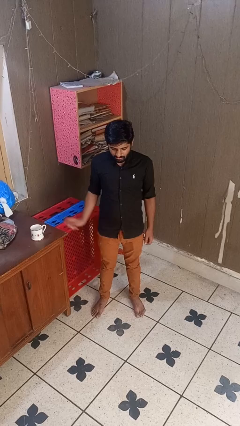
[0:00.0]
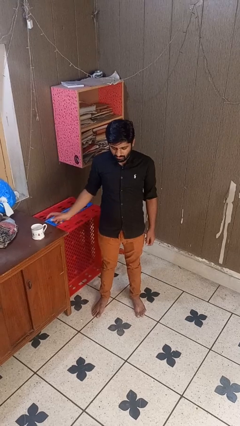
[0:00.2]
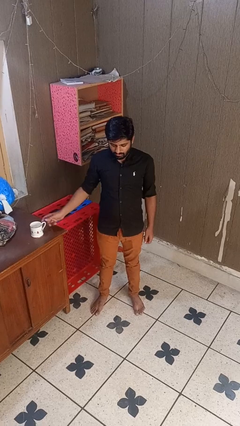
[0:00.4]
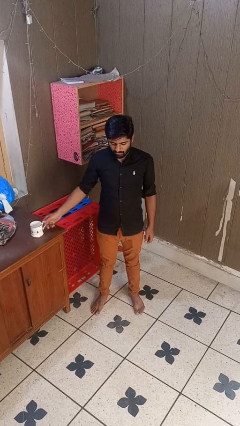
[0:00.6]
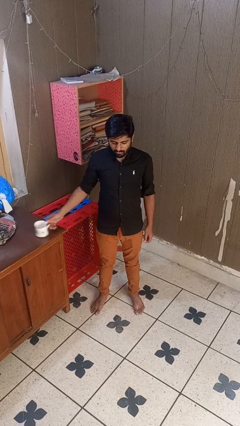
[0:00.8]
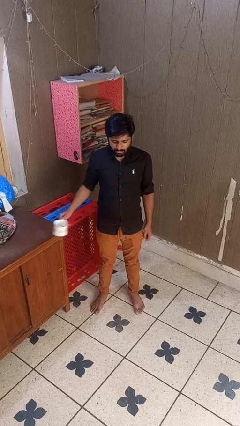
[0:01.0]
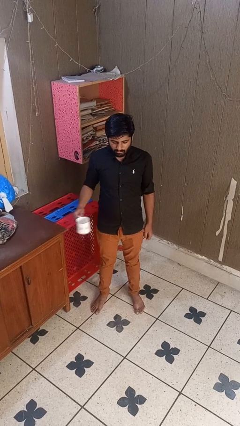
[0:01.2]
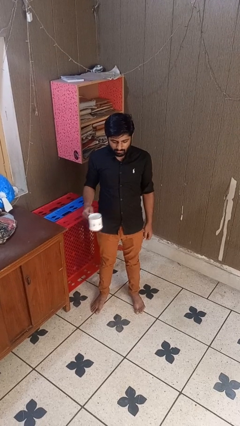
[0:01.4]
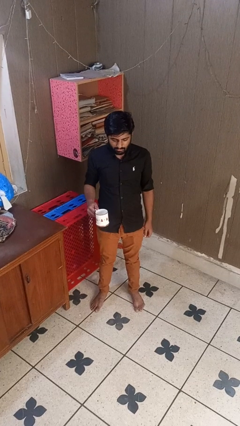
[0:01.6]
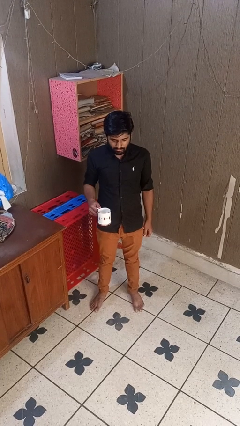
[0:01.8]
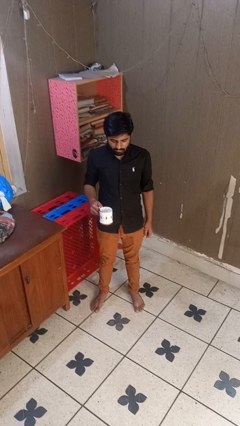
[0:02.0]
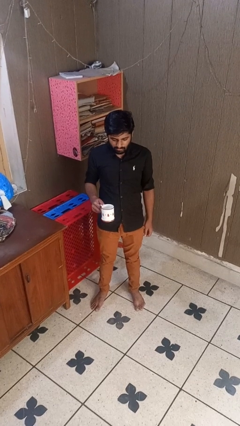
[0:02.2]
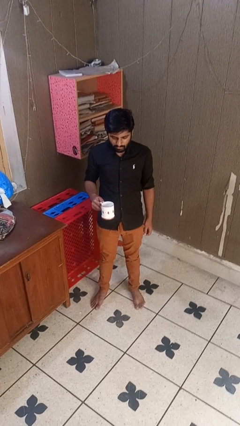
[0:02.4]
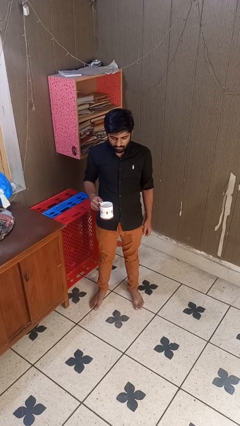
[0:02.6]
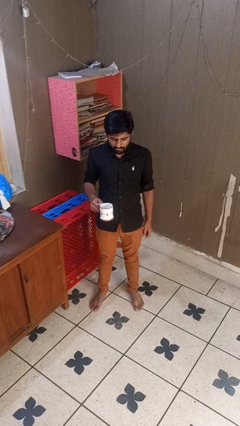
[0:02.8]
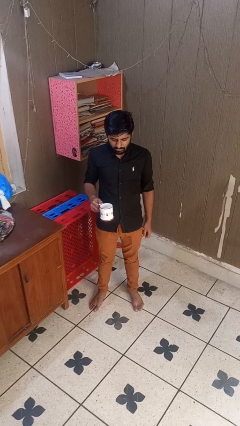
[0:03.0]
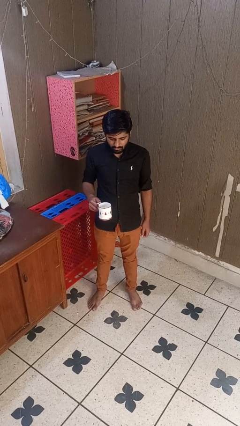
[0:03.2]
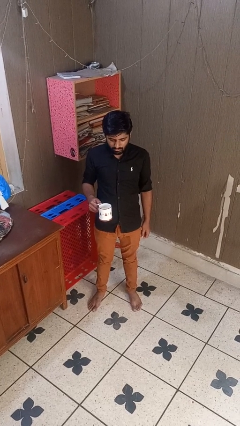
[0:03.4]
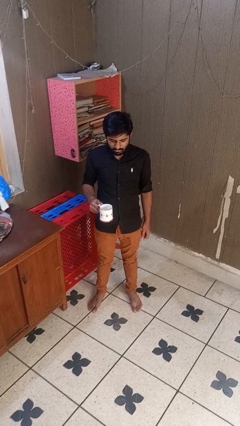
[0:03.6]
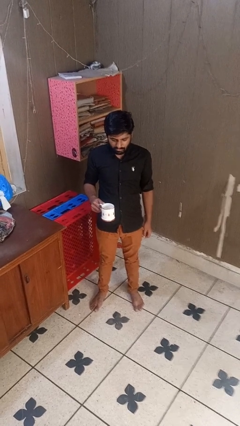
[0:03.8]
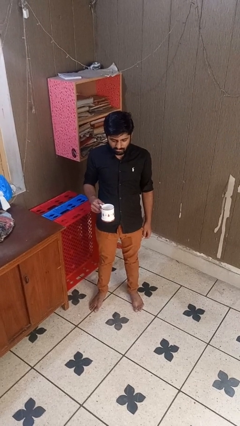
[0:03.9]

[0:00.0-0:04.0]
person picks up object from table

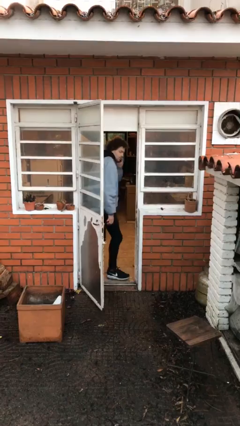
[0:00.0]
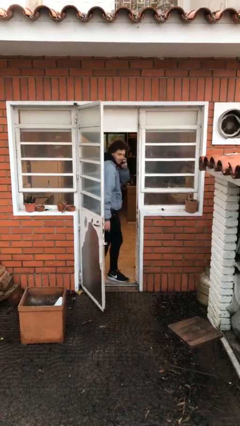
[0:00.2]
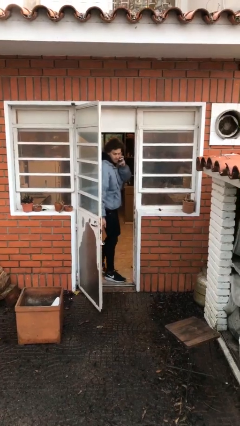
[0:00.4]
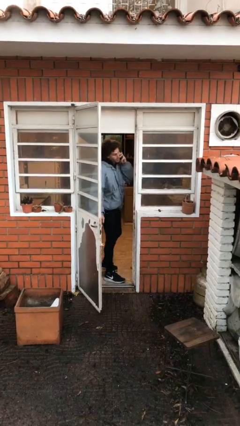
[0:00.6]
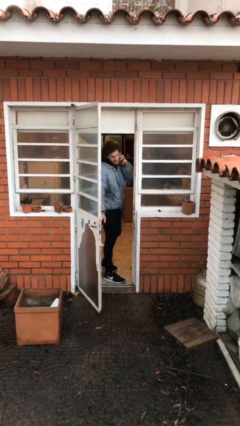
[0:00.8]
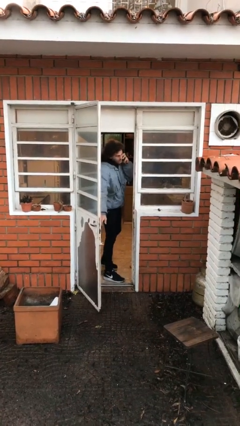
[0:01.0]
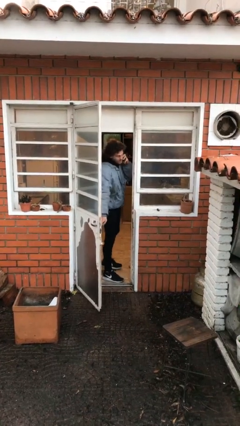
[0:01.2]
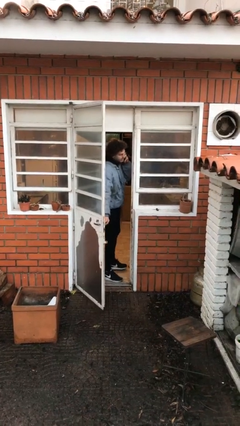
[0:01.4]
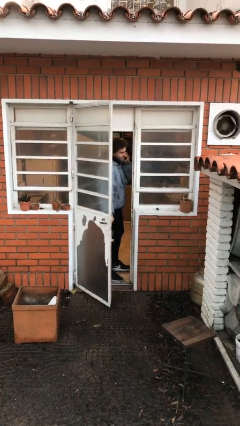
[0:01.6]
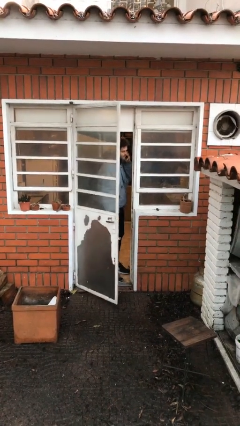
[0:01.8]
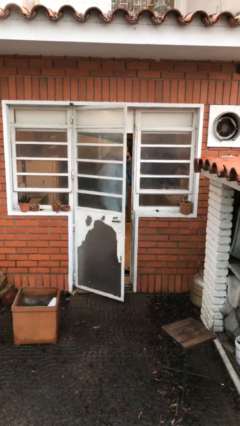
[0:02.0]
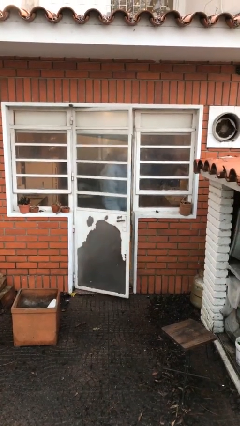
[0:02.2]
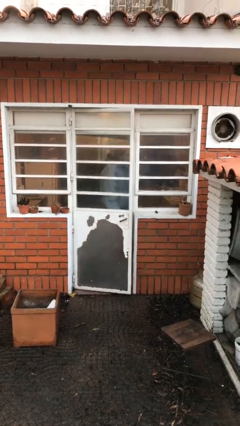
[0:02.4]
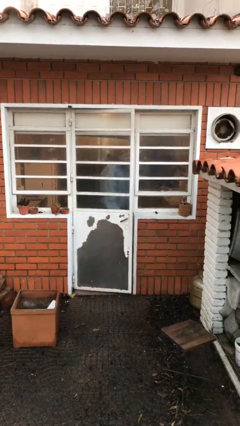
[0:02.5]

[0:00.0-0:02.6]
person closes facility door

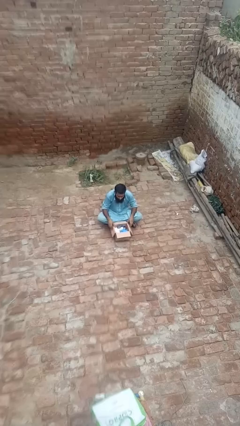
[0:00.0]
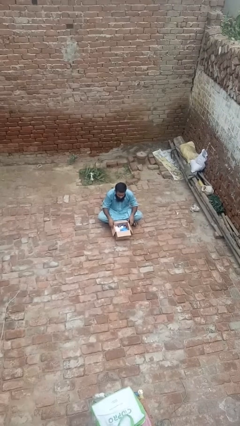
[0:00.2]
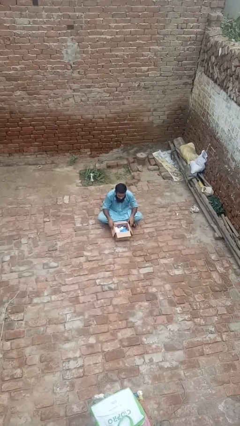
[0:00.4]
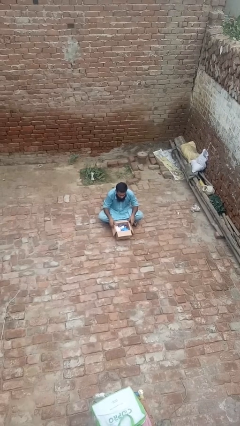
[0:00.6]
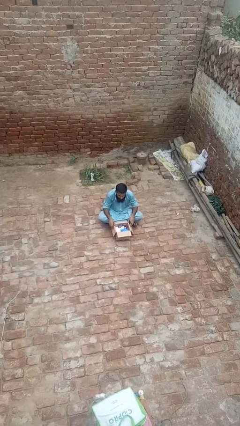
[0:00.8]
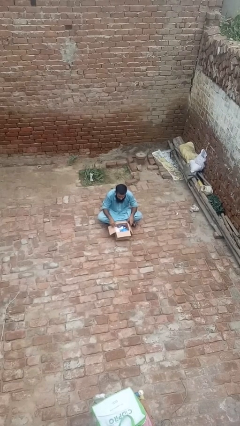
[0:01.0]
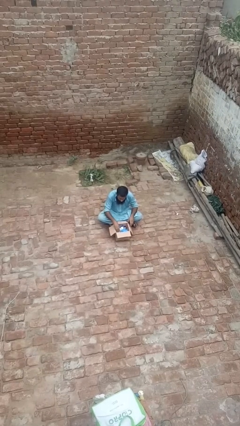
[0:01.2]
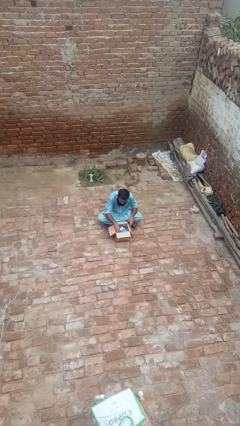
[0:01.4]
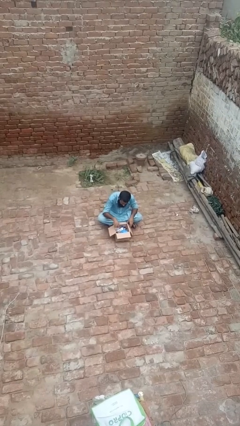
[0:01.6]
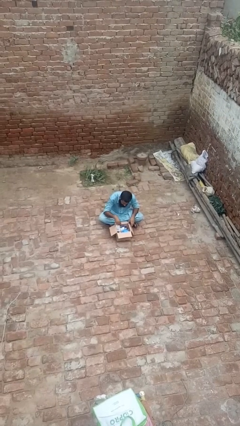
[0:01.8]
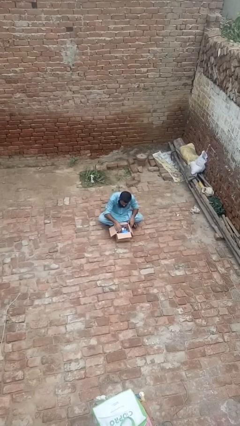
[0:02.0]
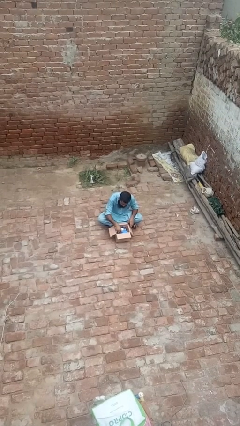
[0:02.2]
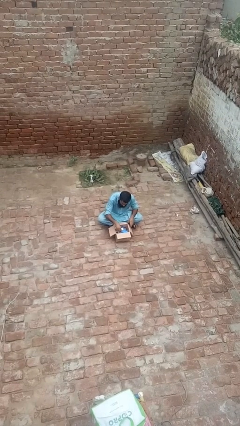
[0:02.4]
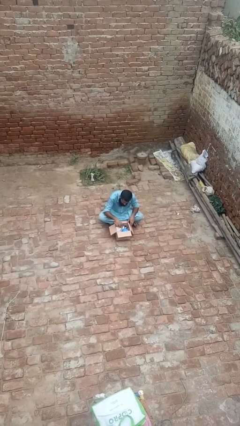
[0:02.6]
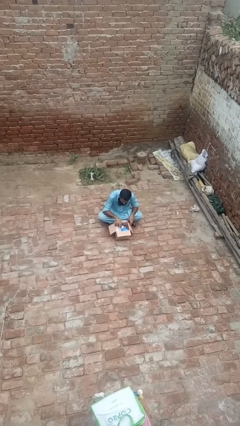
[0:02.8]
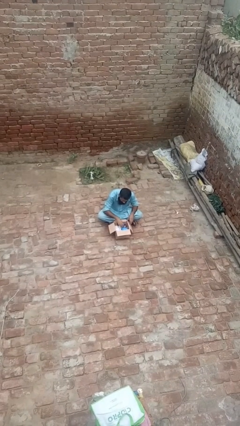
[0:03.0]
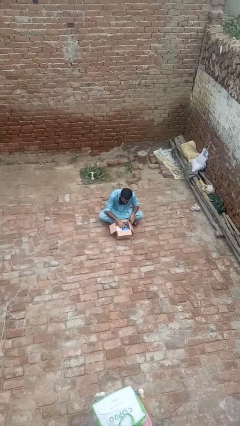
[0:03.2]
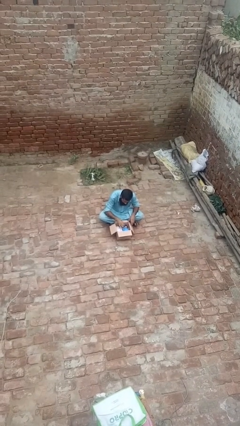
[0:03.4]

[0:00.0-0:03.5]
person searches in box

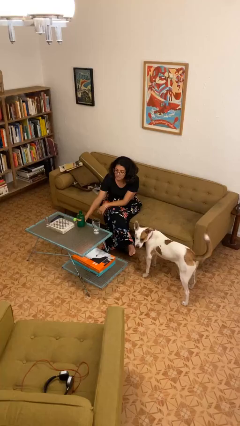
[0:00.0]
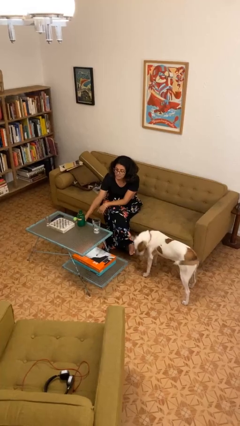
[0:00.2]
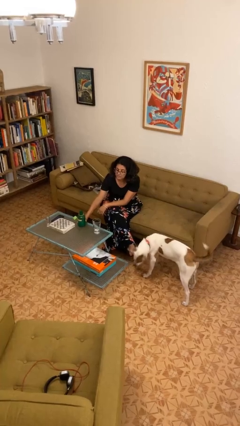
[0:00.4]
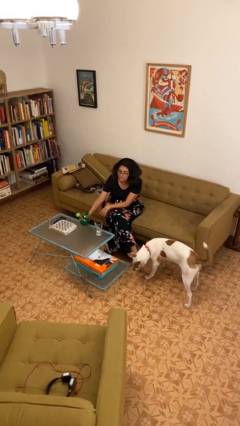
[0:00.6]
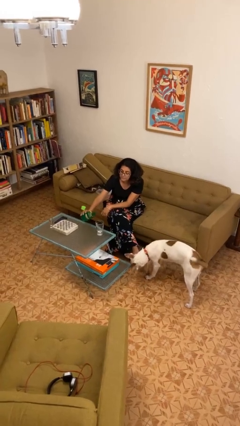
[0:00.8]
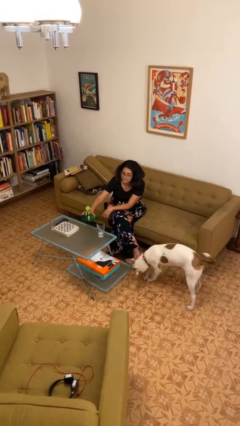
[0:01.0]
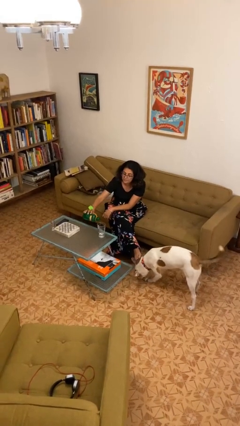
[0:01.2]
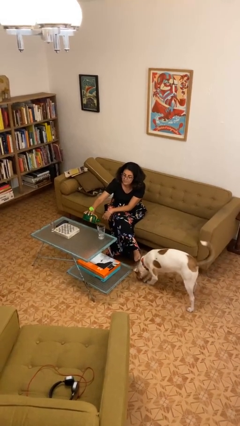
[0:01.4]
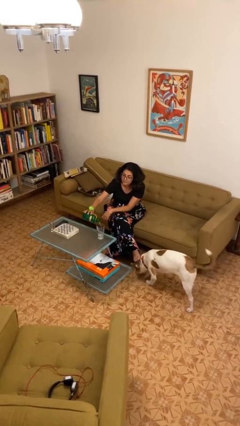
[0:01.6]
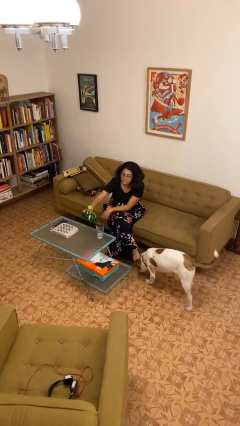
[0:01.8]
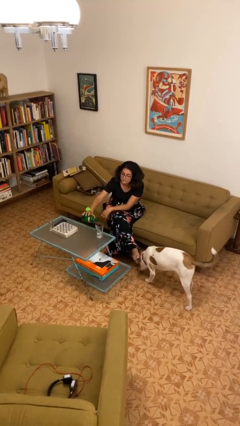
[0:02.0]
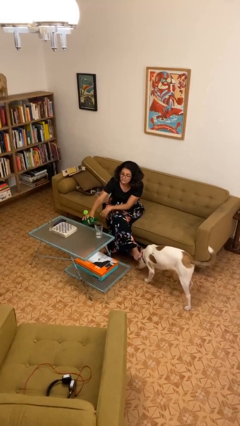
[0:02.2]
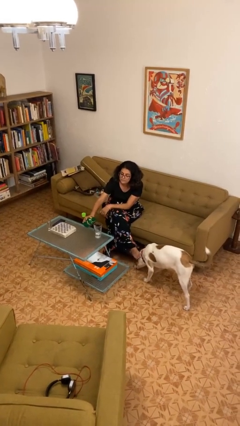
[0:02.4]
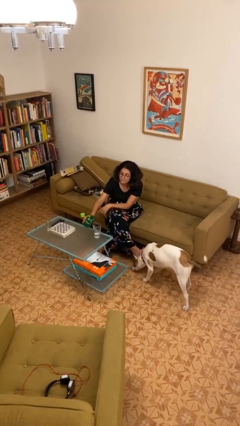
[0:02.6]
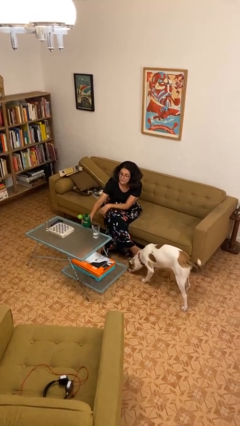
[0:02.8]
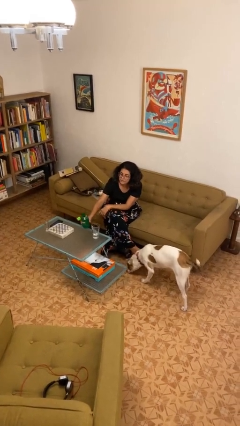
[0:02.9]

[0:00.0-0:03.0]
person pours liquid into cup

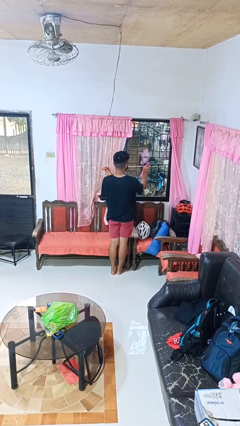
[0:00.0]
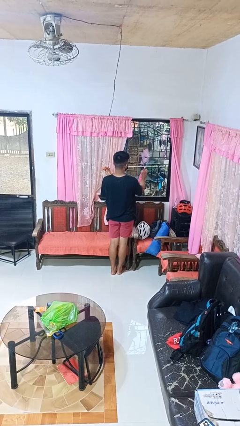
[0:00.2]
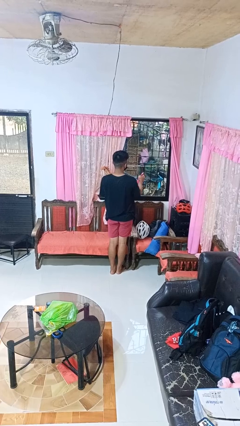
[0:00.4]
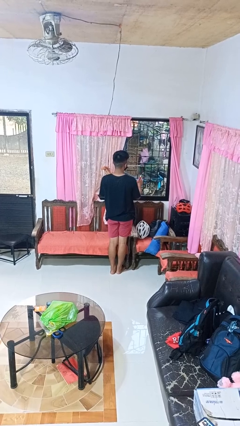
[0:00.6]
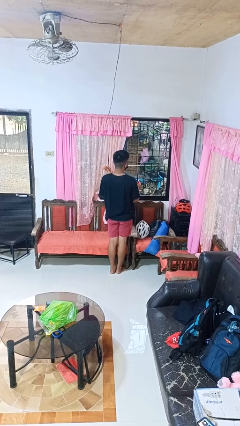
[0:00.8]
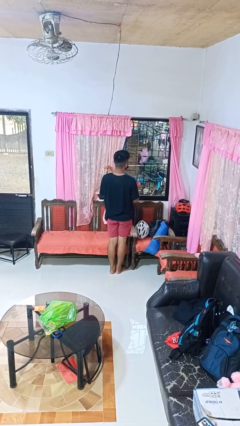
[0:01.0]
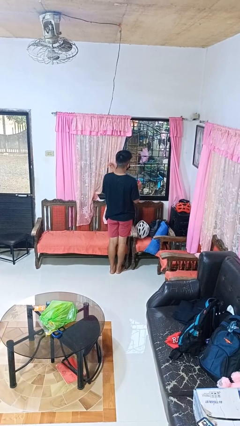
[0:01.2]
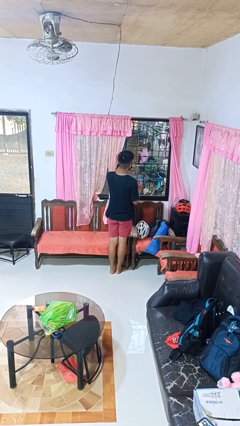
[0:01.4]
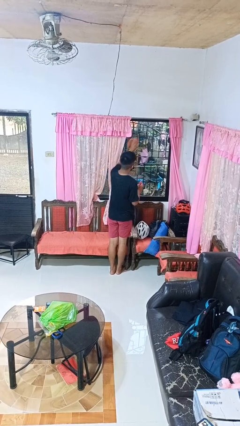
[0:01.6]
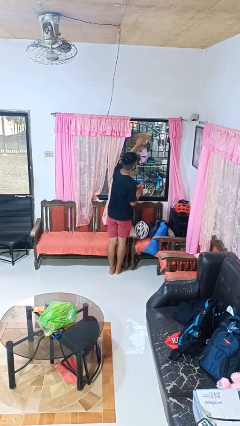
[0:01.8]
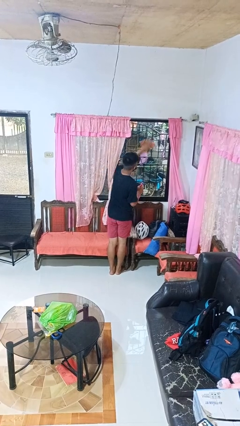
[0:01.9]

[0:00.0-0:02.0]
person sprays from bottle

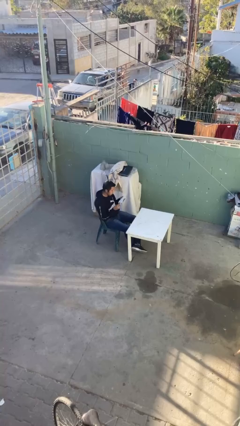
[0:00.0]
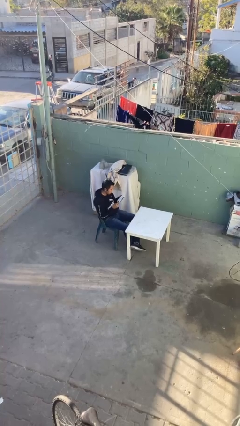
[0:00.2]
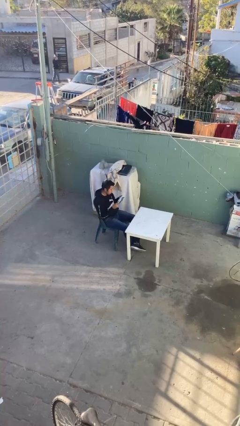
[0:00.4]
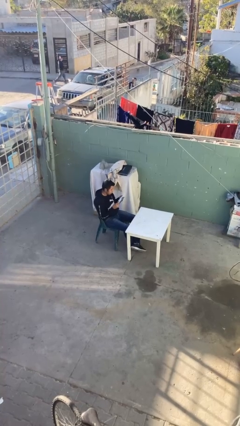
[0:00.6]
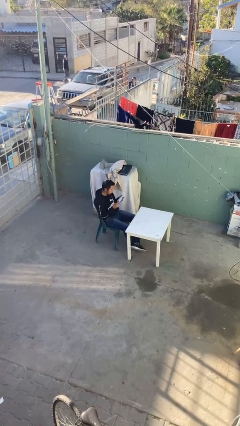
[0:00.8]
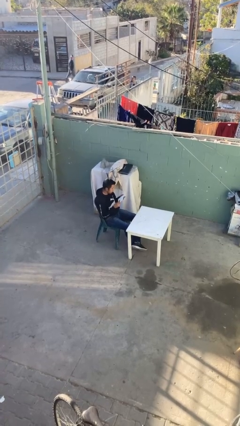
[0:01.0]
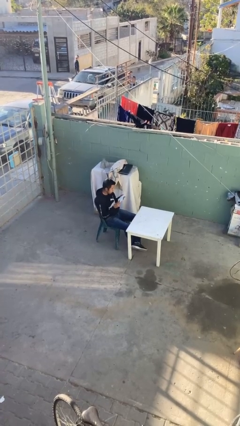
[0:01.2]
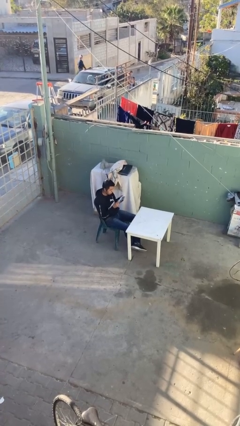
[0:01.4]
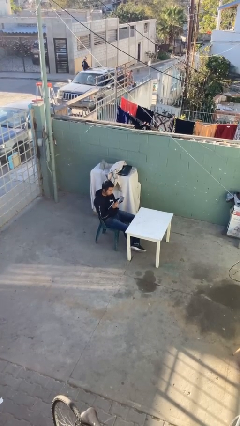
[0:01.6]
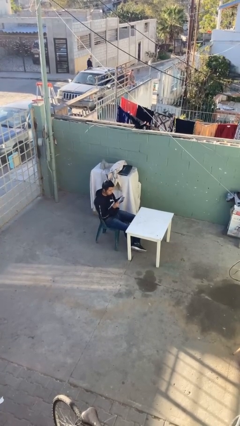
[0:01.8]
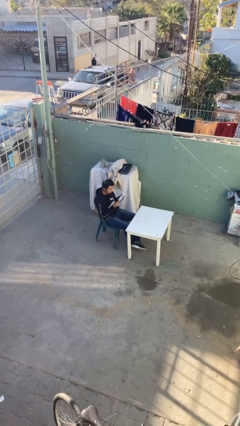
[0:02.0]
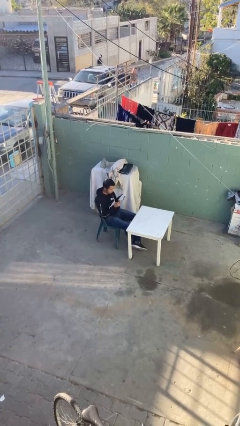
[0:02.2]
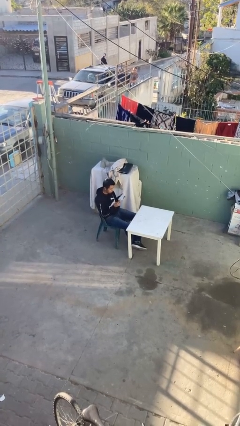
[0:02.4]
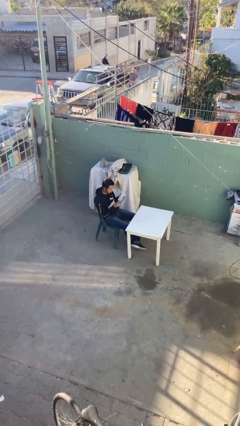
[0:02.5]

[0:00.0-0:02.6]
person reads document
